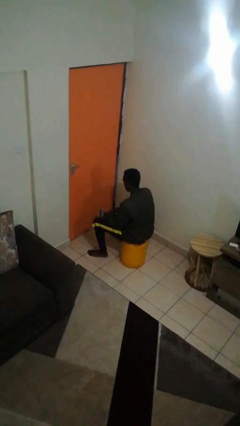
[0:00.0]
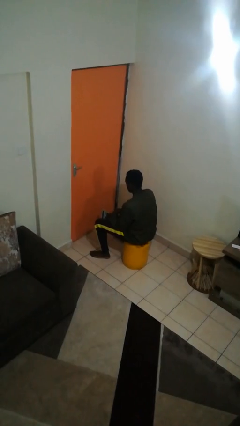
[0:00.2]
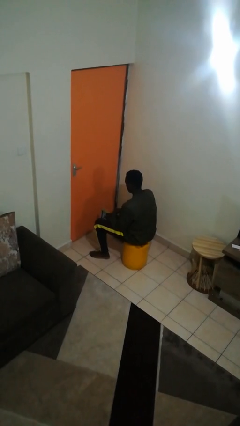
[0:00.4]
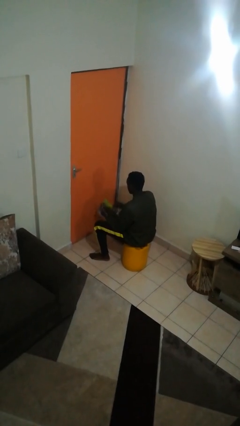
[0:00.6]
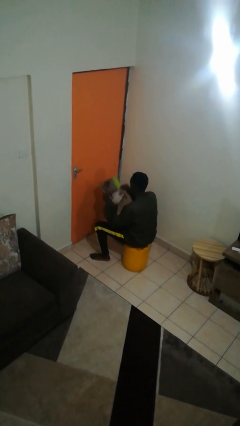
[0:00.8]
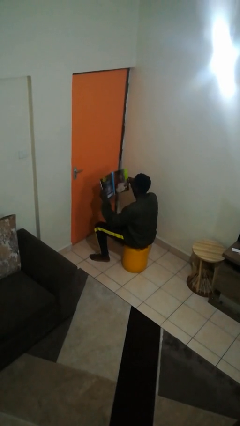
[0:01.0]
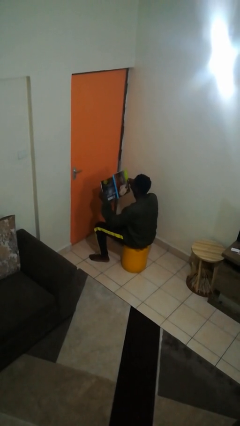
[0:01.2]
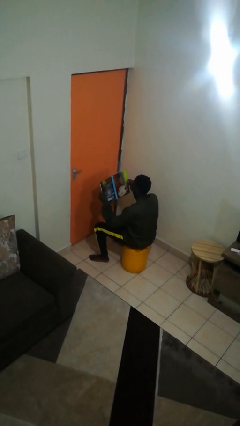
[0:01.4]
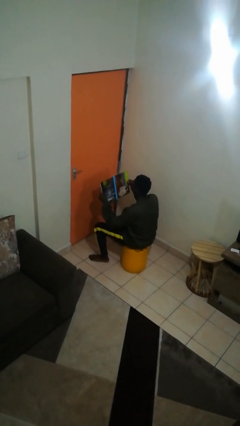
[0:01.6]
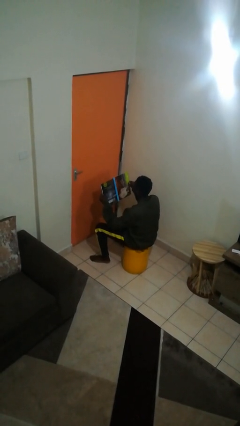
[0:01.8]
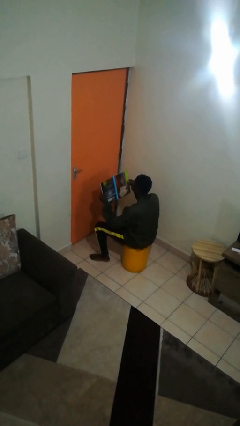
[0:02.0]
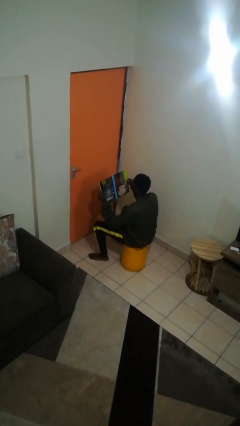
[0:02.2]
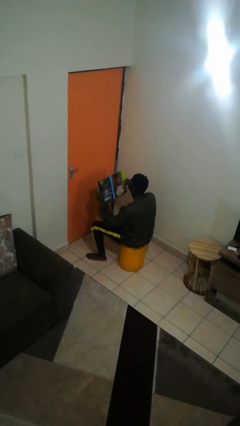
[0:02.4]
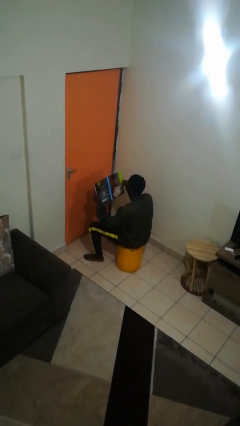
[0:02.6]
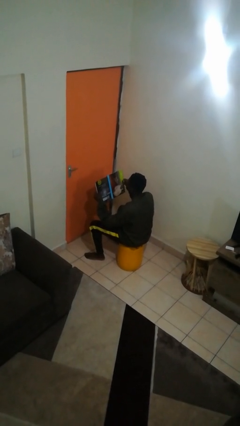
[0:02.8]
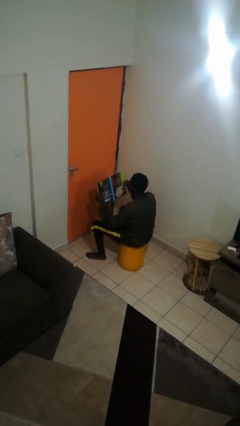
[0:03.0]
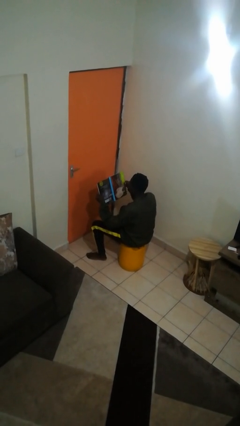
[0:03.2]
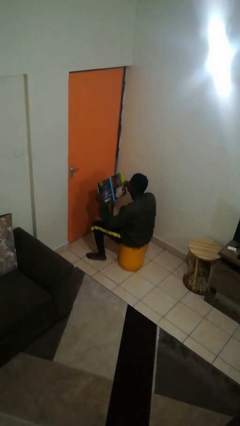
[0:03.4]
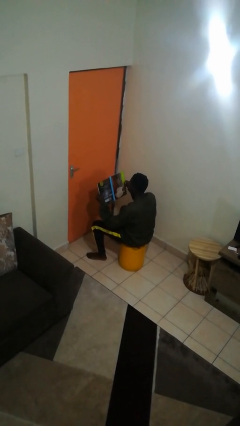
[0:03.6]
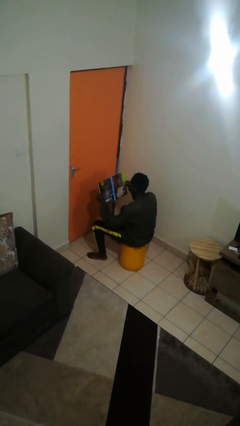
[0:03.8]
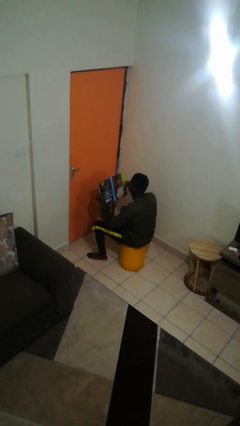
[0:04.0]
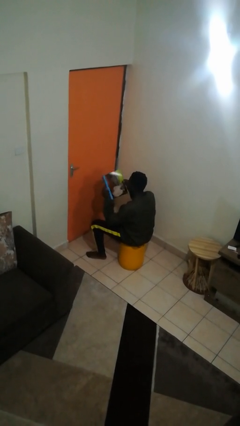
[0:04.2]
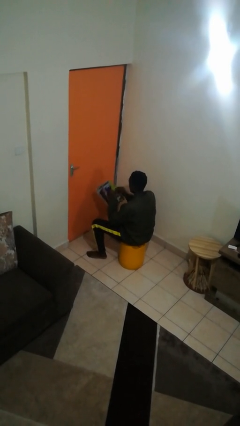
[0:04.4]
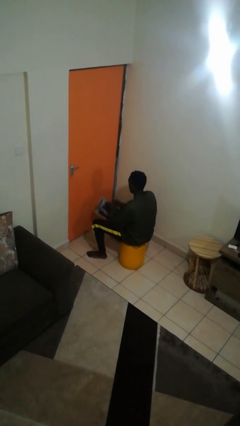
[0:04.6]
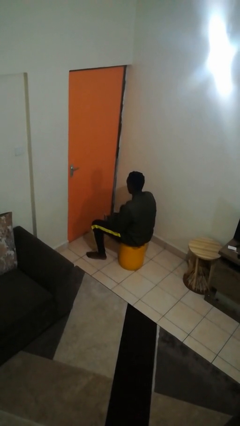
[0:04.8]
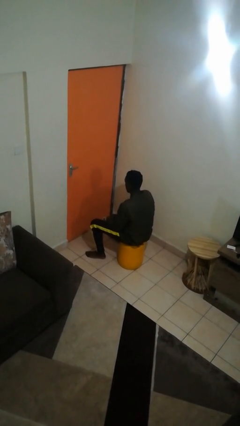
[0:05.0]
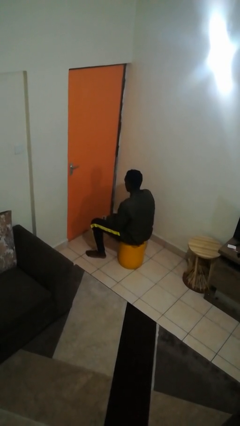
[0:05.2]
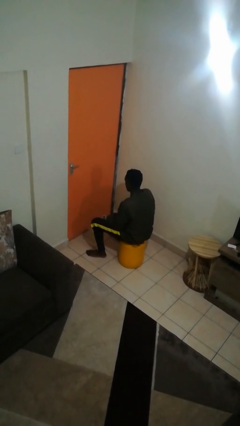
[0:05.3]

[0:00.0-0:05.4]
person reads magazine

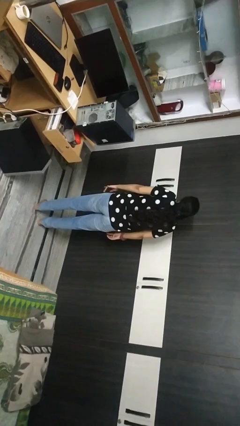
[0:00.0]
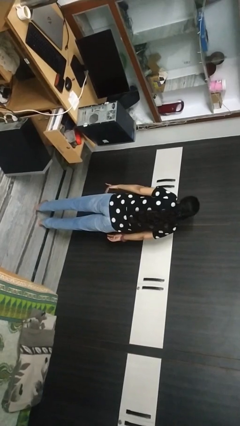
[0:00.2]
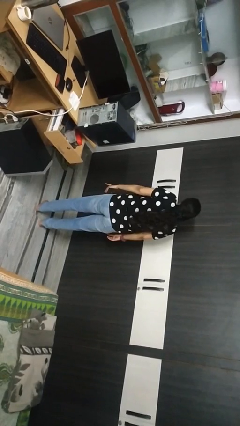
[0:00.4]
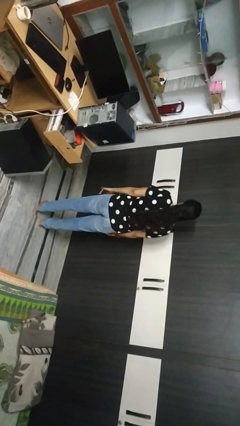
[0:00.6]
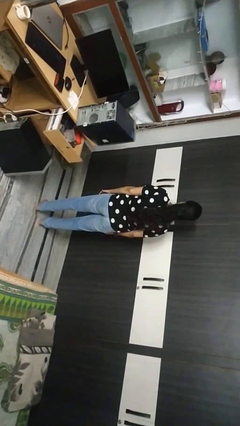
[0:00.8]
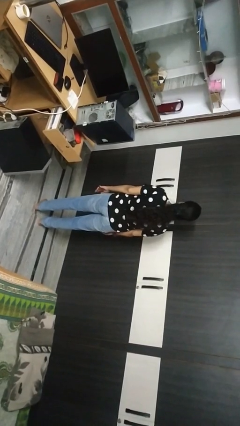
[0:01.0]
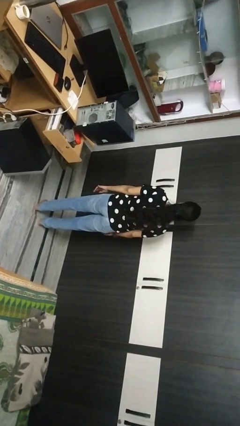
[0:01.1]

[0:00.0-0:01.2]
person shrugs

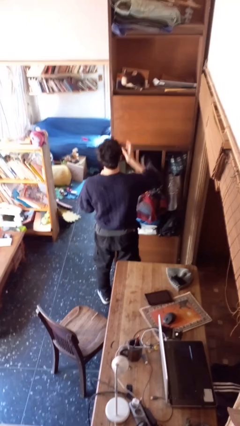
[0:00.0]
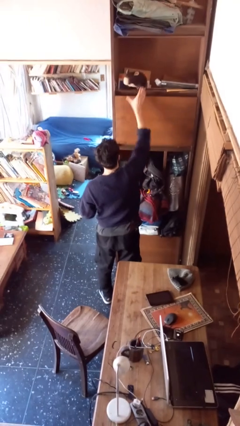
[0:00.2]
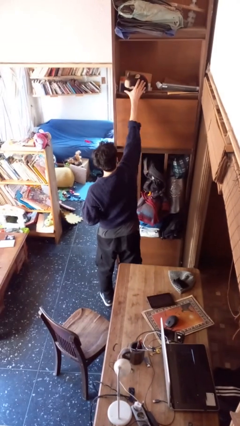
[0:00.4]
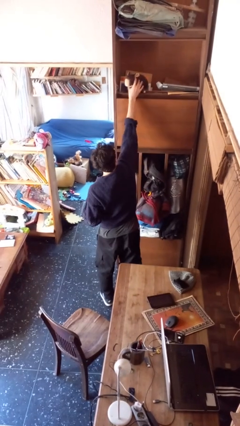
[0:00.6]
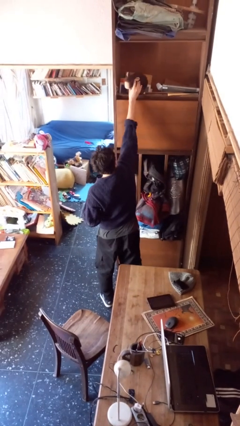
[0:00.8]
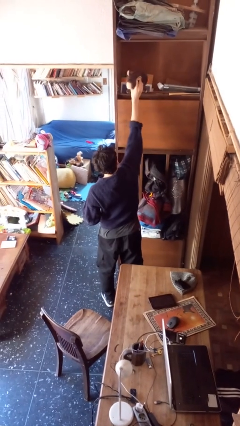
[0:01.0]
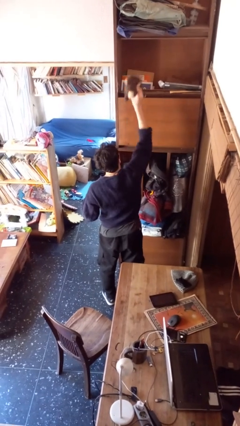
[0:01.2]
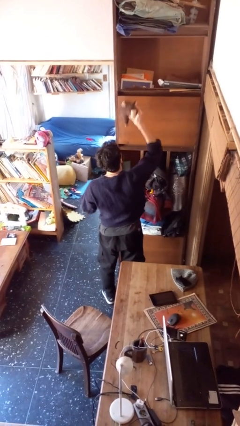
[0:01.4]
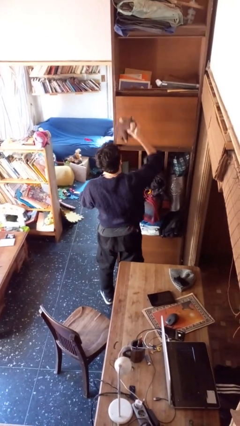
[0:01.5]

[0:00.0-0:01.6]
person picks up object from shelf

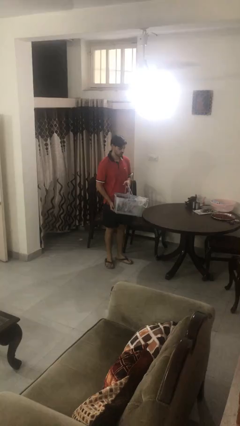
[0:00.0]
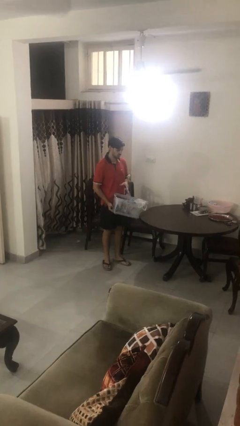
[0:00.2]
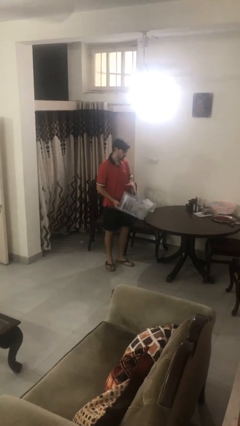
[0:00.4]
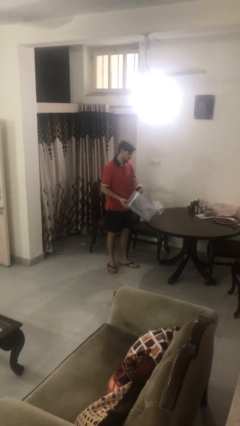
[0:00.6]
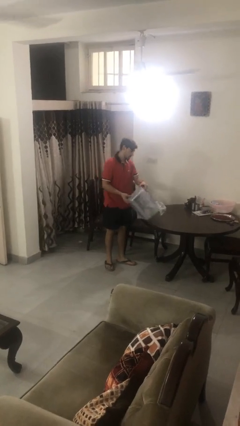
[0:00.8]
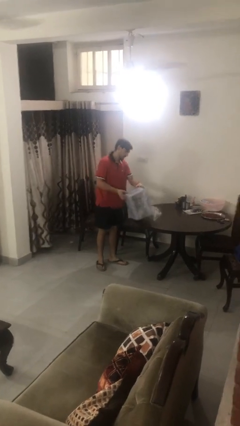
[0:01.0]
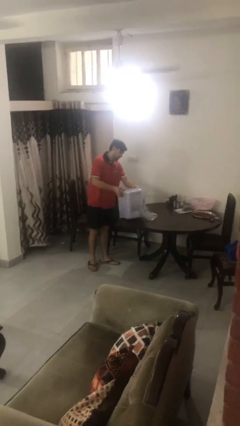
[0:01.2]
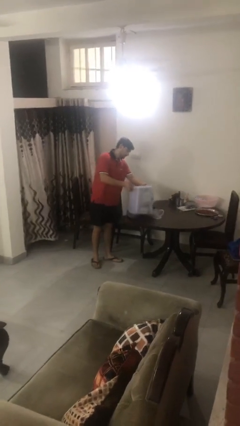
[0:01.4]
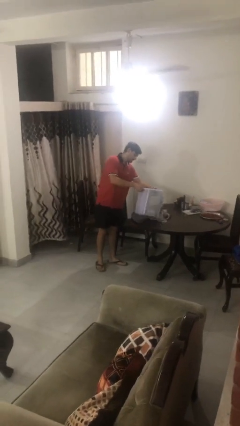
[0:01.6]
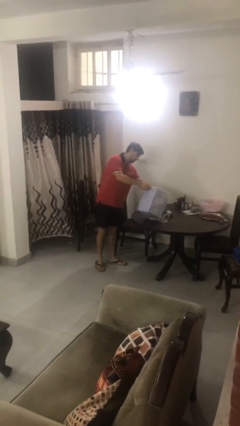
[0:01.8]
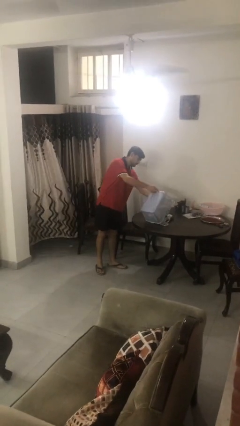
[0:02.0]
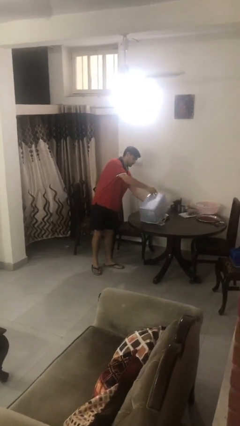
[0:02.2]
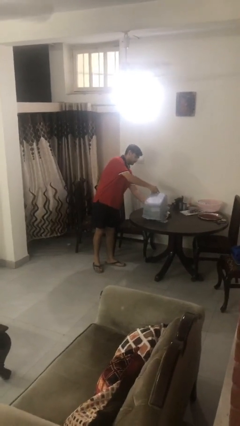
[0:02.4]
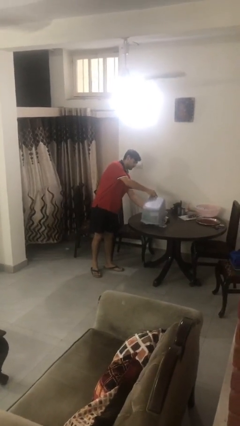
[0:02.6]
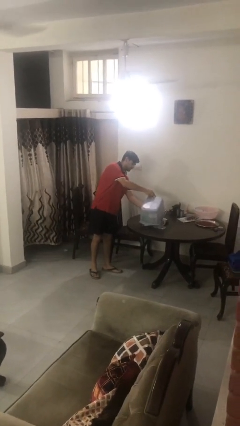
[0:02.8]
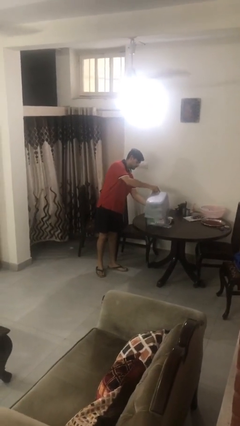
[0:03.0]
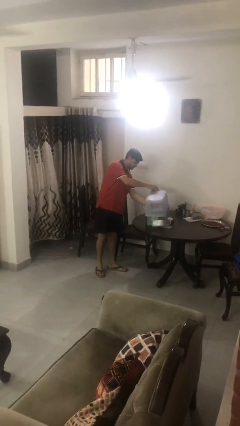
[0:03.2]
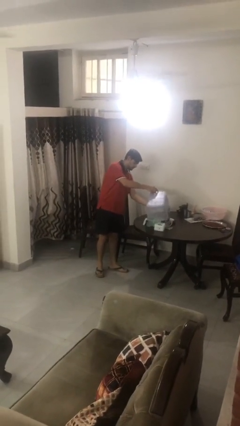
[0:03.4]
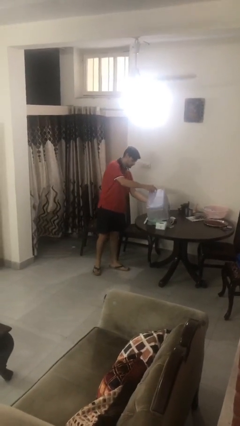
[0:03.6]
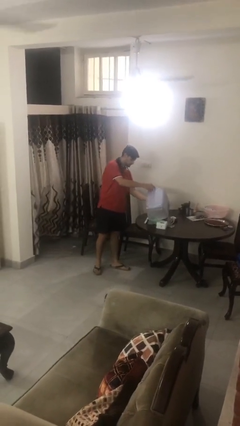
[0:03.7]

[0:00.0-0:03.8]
person unloads box onto table

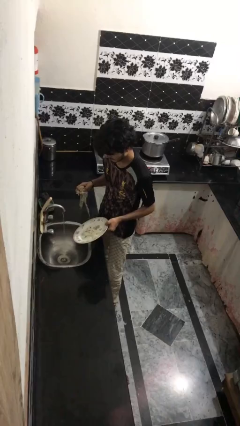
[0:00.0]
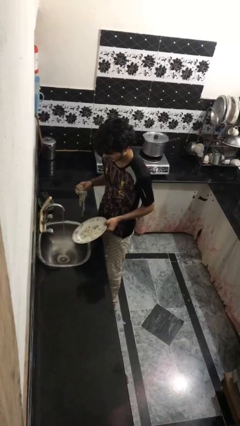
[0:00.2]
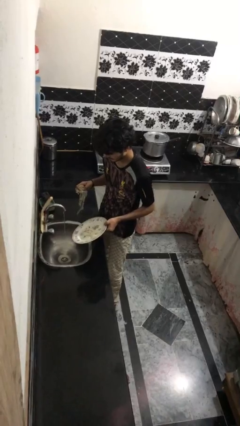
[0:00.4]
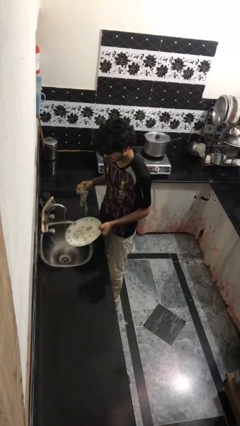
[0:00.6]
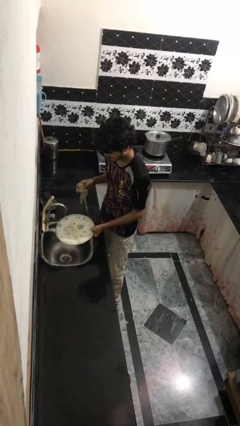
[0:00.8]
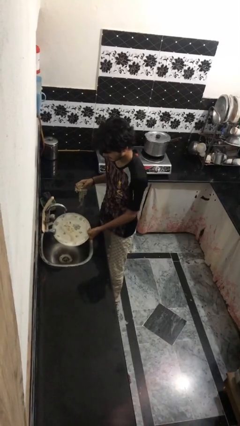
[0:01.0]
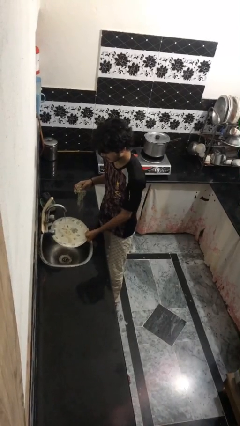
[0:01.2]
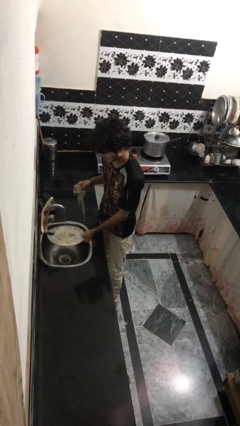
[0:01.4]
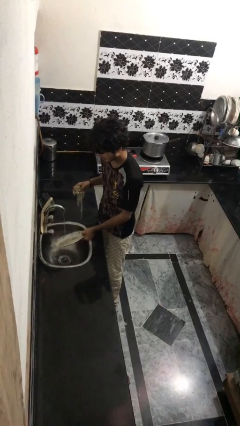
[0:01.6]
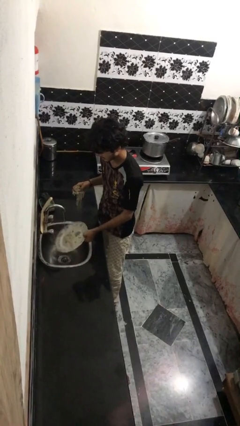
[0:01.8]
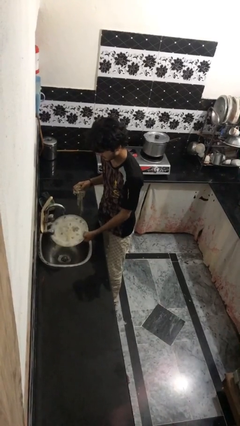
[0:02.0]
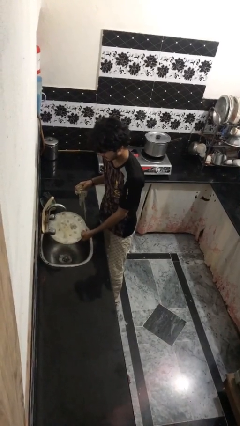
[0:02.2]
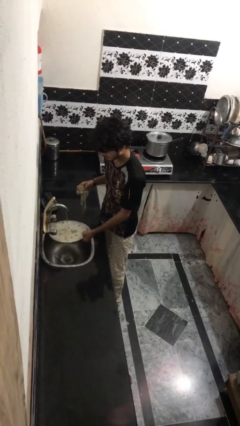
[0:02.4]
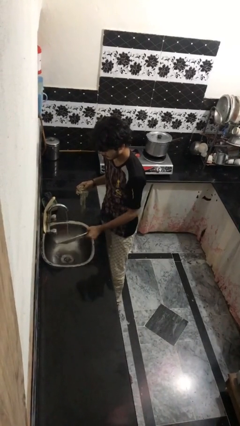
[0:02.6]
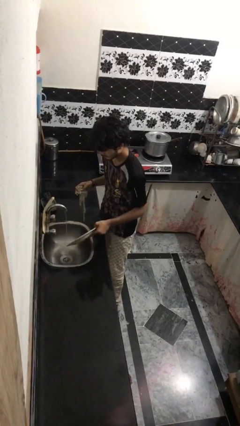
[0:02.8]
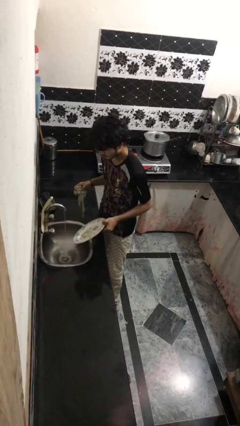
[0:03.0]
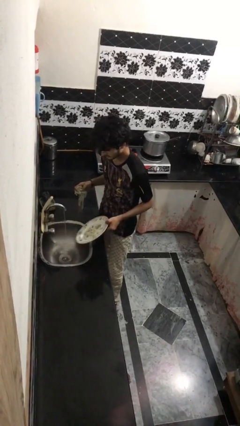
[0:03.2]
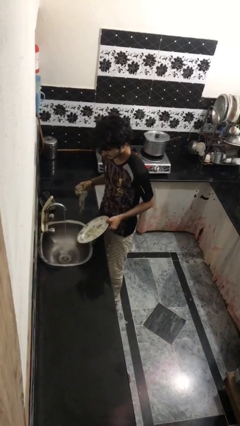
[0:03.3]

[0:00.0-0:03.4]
person washes dish

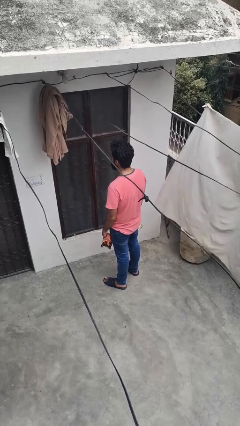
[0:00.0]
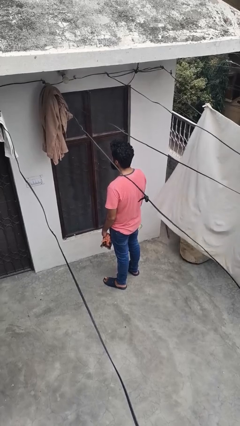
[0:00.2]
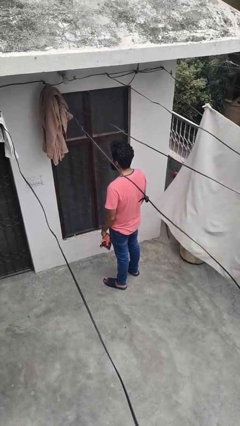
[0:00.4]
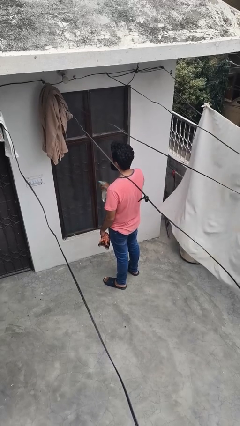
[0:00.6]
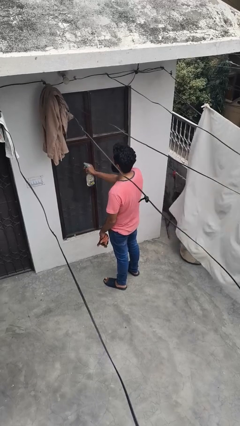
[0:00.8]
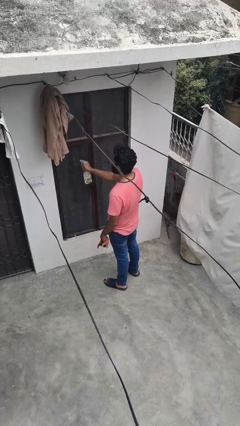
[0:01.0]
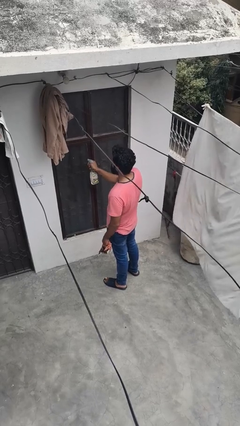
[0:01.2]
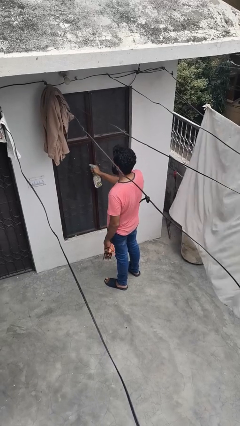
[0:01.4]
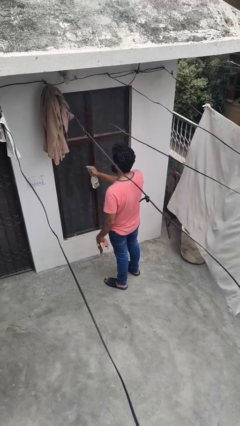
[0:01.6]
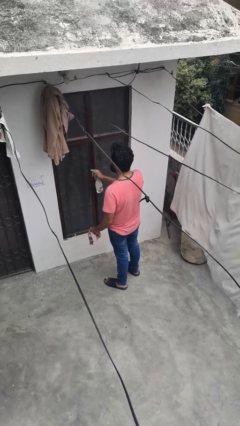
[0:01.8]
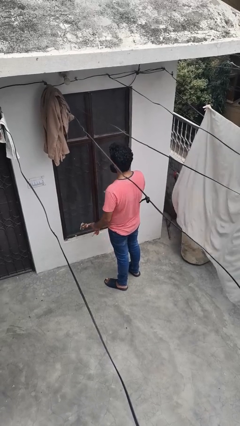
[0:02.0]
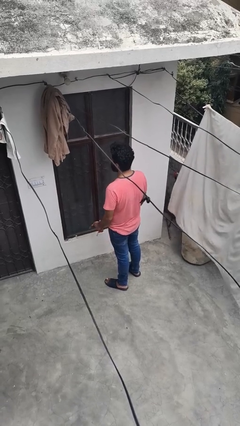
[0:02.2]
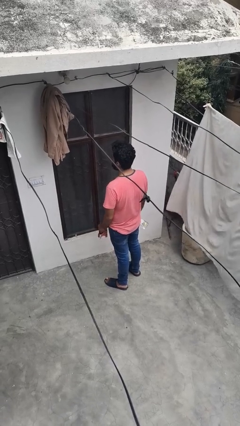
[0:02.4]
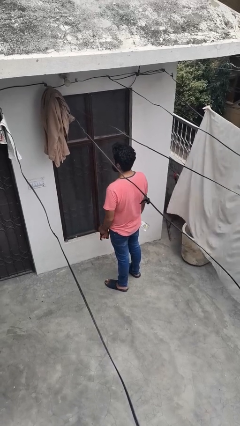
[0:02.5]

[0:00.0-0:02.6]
person sprays from bottle
